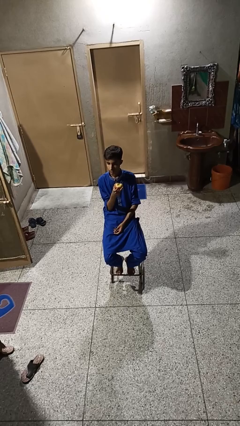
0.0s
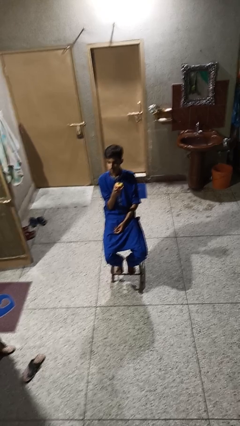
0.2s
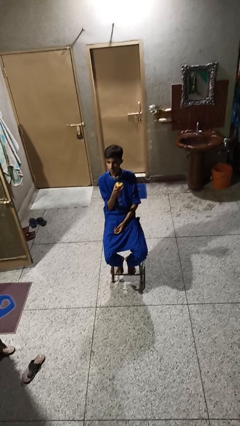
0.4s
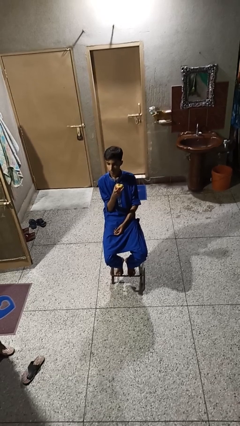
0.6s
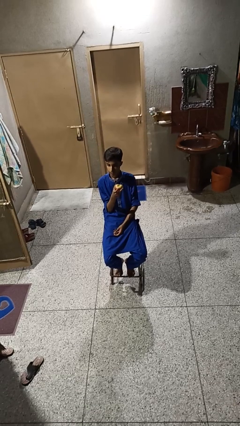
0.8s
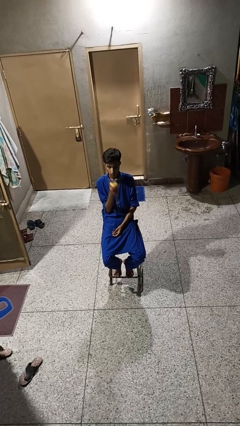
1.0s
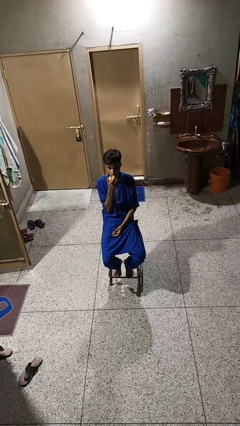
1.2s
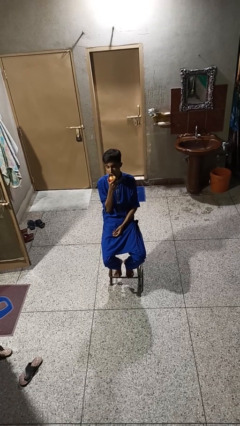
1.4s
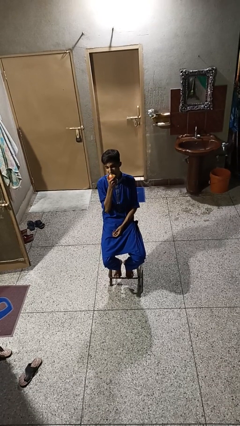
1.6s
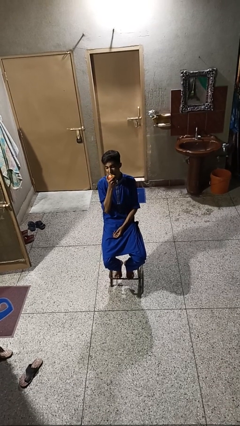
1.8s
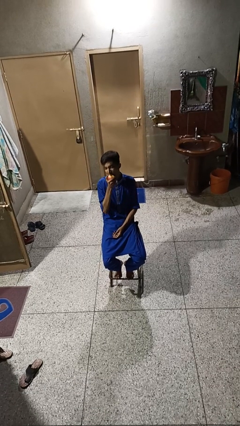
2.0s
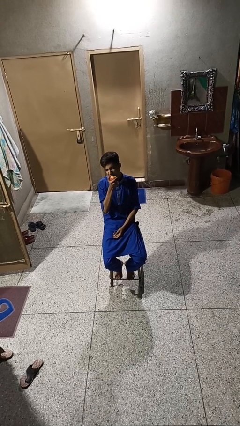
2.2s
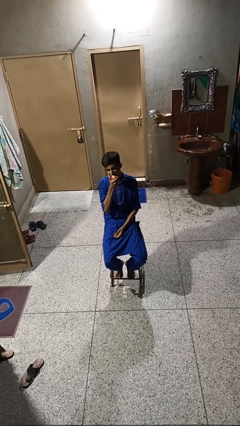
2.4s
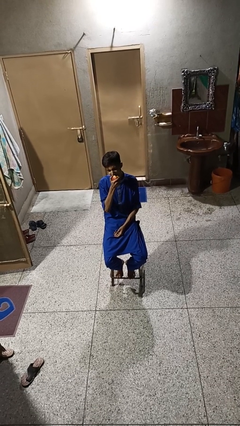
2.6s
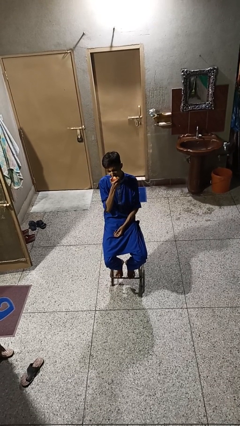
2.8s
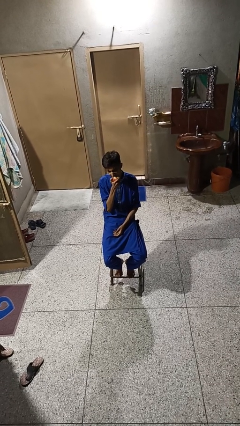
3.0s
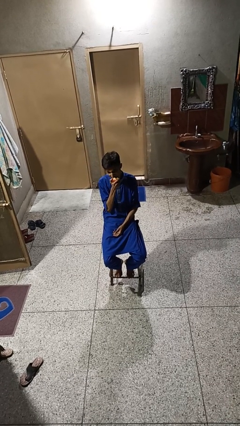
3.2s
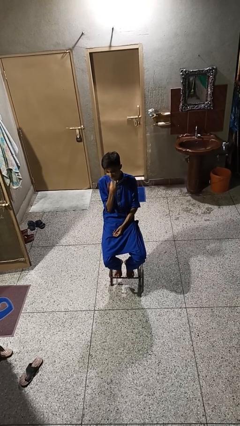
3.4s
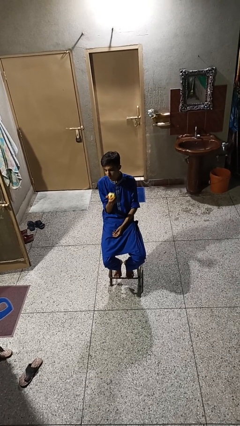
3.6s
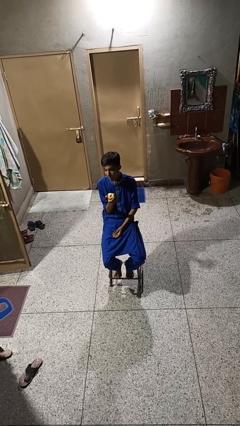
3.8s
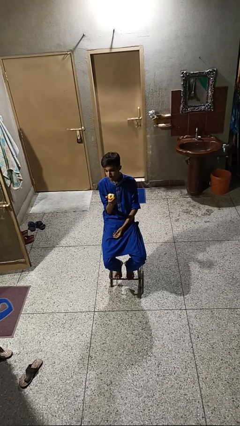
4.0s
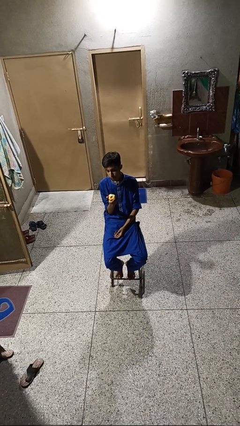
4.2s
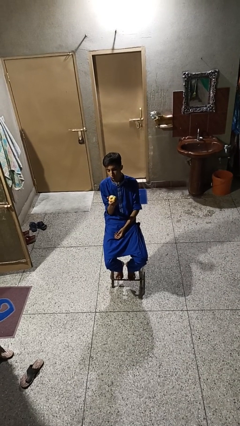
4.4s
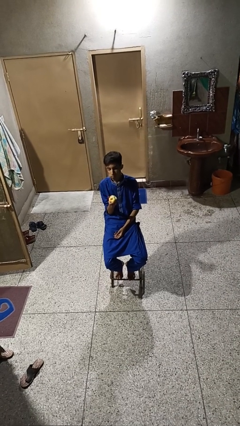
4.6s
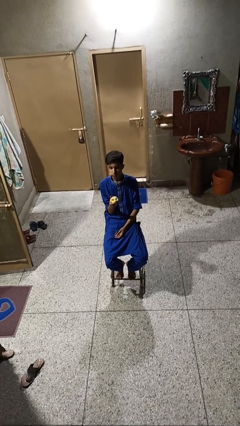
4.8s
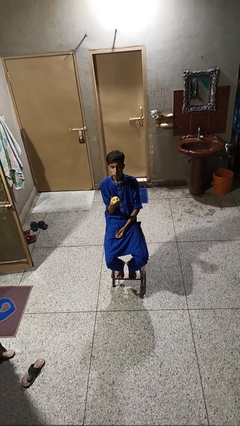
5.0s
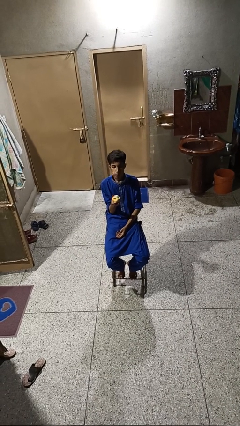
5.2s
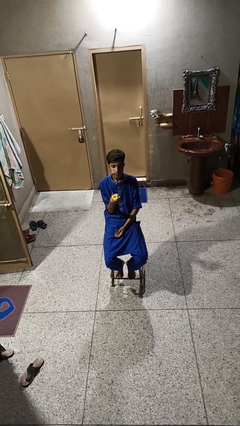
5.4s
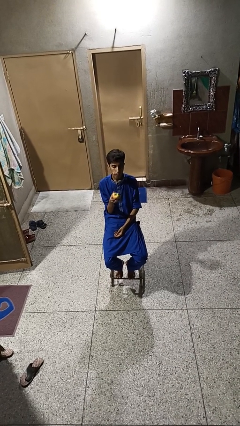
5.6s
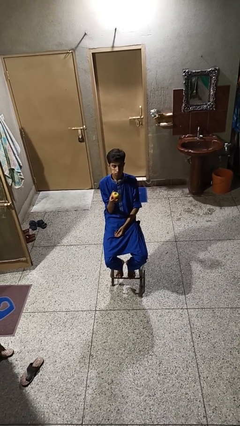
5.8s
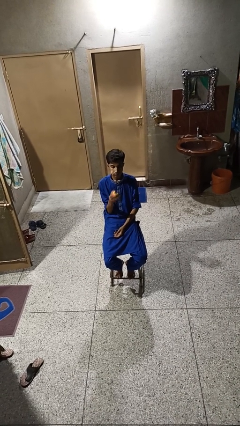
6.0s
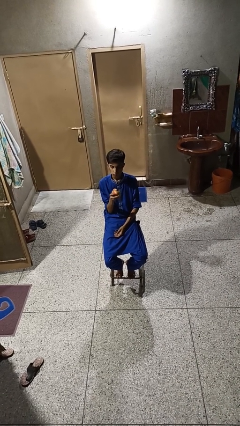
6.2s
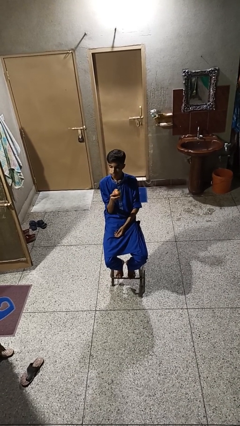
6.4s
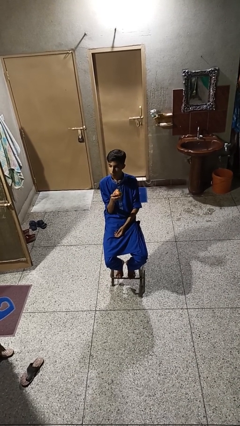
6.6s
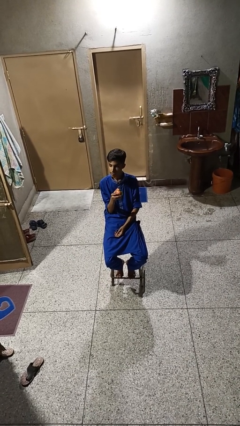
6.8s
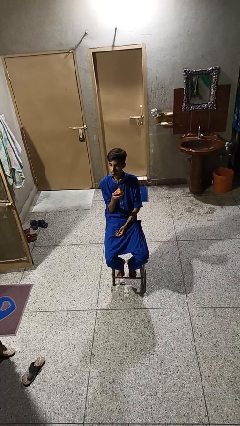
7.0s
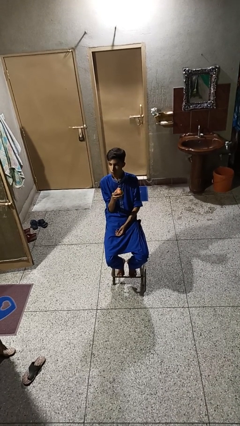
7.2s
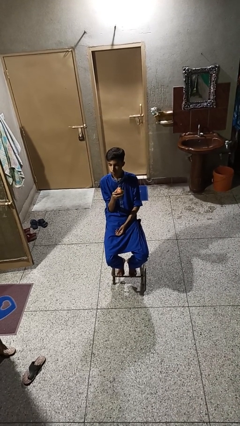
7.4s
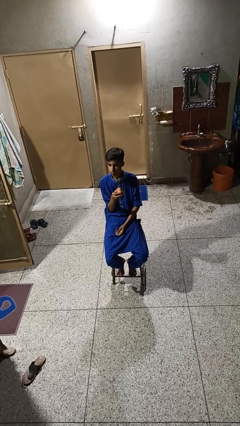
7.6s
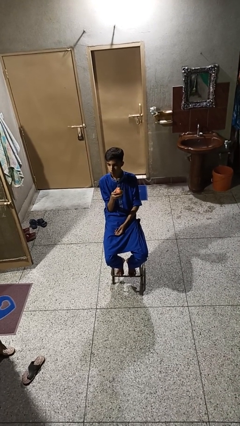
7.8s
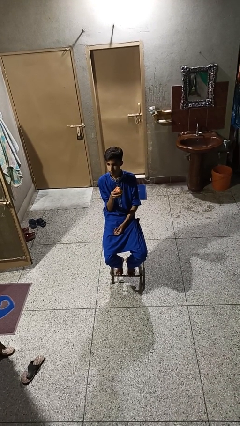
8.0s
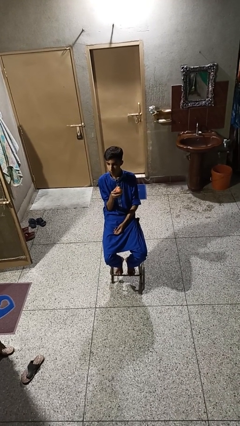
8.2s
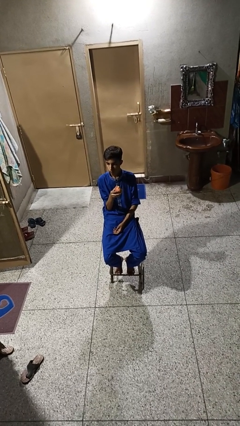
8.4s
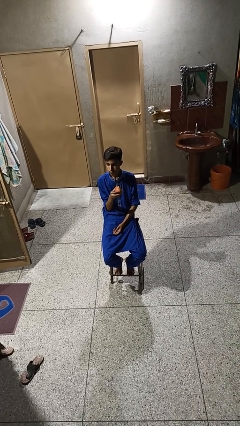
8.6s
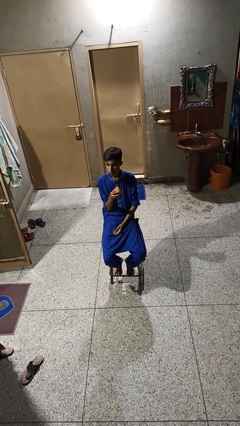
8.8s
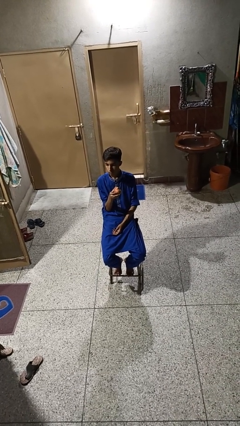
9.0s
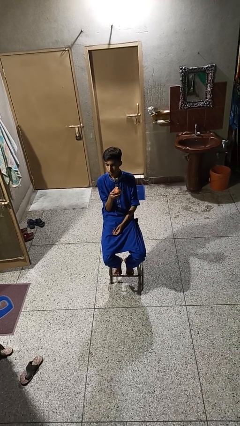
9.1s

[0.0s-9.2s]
person eats apple

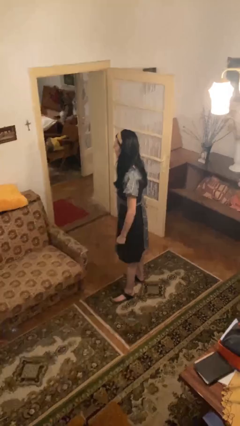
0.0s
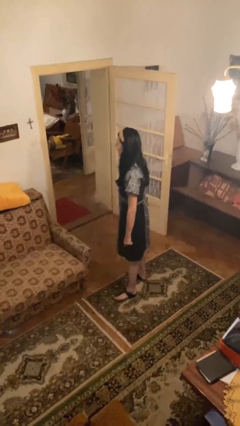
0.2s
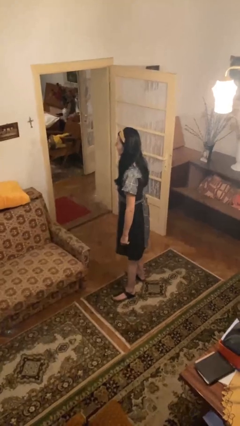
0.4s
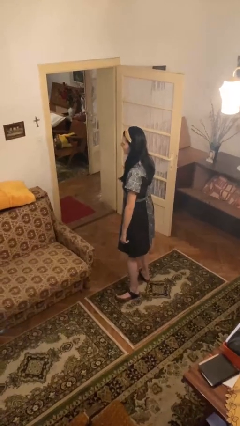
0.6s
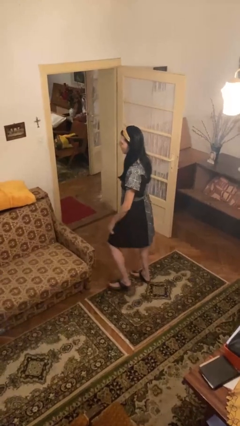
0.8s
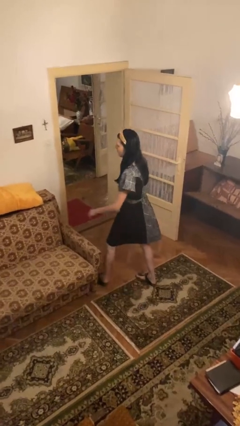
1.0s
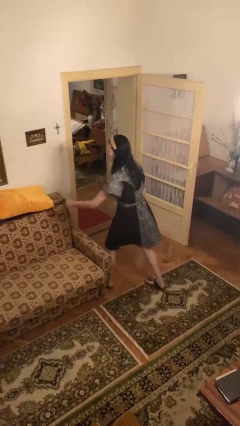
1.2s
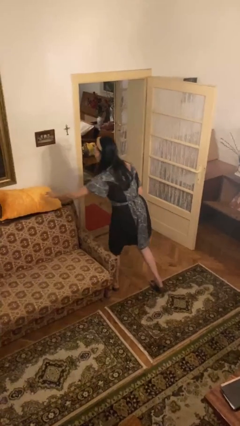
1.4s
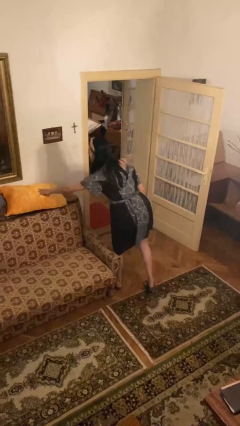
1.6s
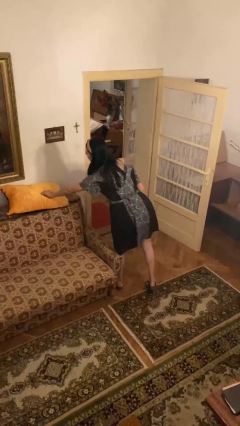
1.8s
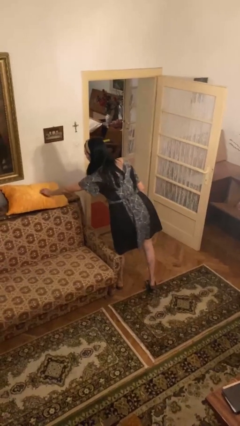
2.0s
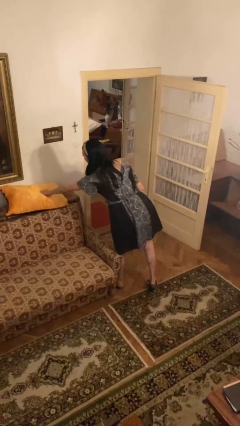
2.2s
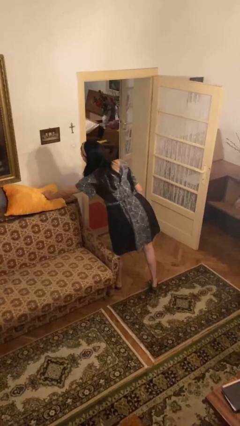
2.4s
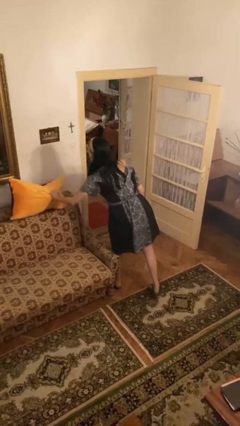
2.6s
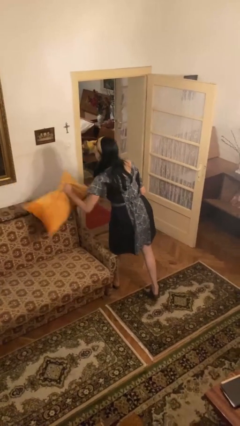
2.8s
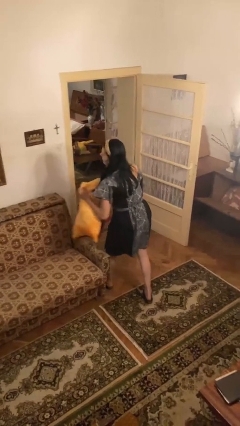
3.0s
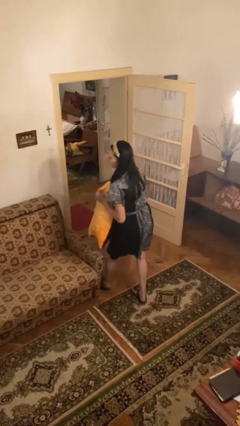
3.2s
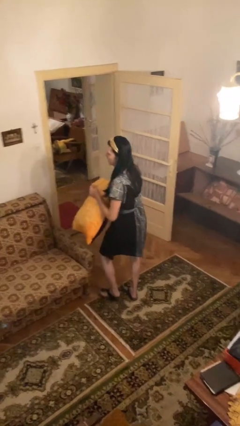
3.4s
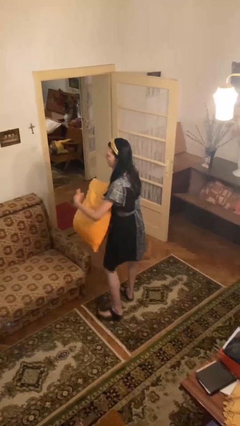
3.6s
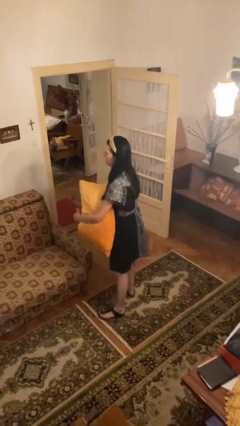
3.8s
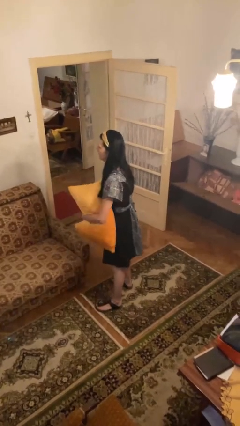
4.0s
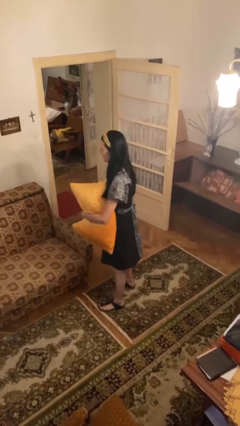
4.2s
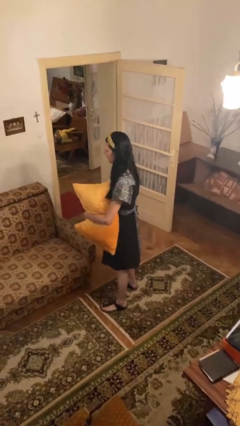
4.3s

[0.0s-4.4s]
person picks up object from couch

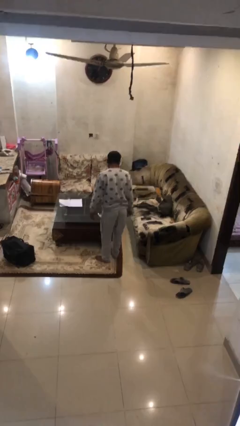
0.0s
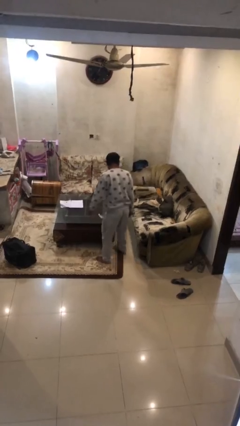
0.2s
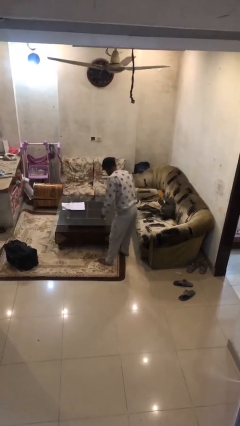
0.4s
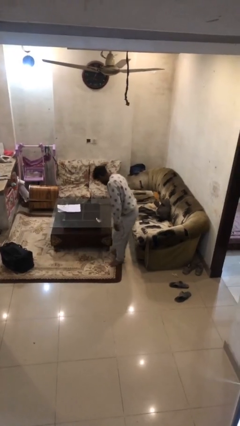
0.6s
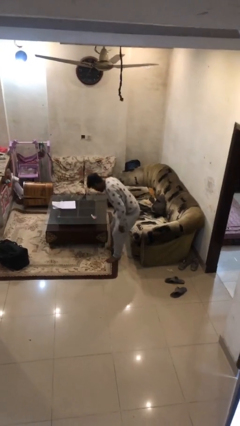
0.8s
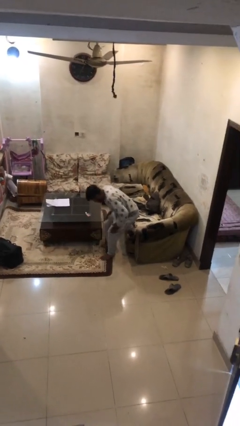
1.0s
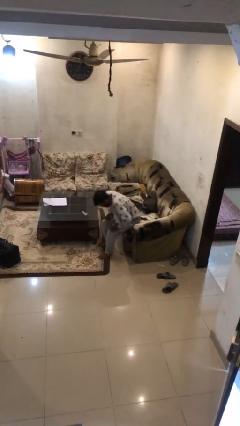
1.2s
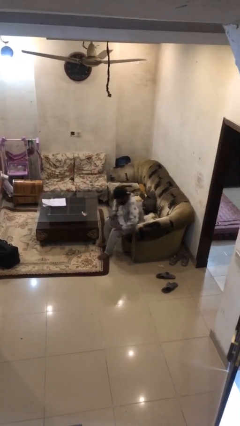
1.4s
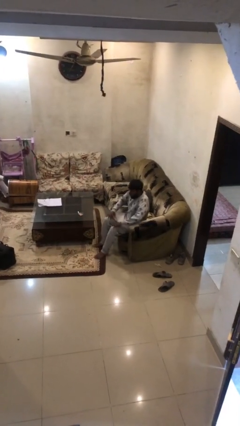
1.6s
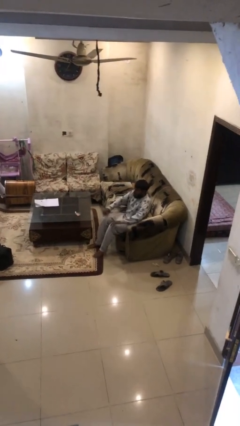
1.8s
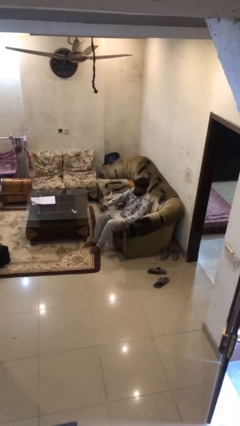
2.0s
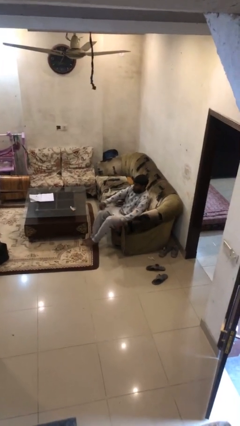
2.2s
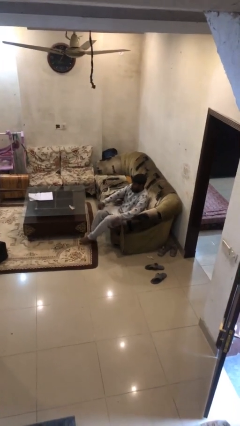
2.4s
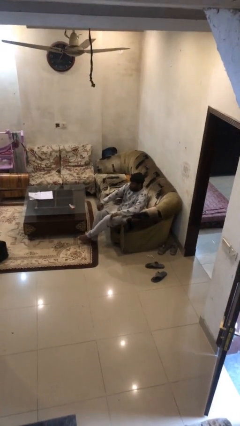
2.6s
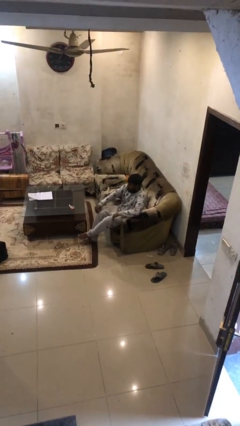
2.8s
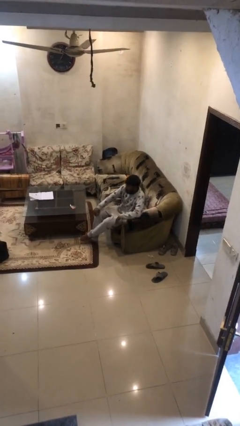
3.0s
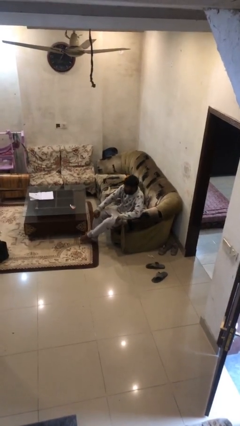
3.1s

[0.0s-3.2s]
person sits down

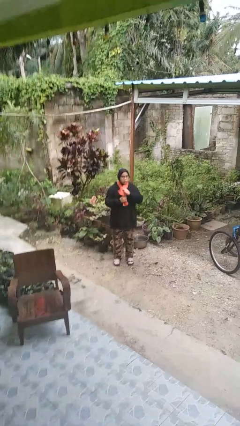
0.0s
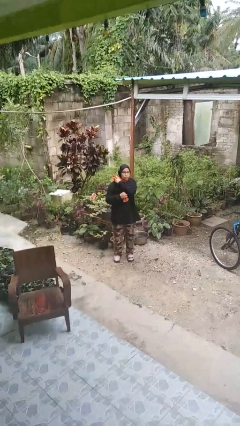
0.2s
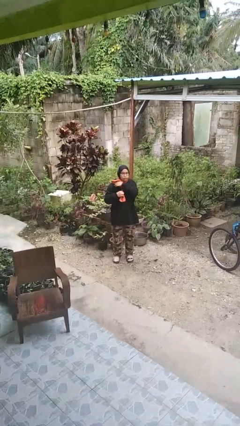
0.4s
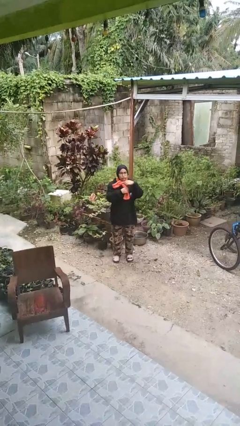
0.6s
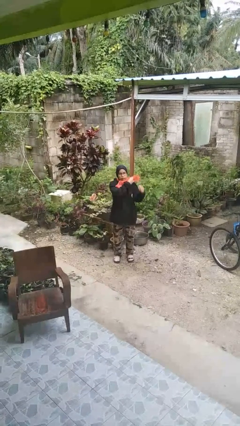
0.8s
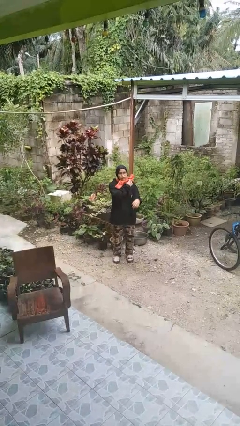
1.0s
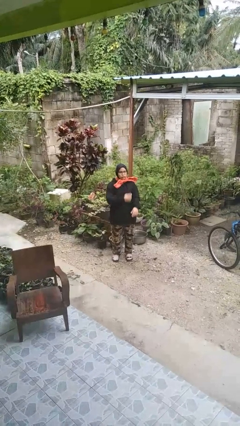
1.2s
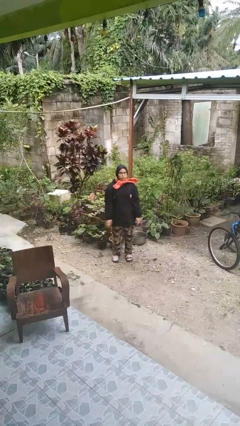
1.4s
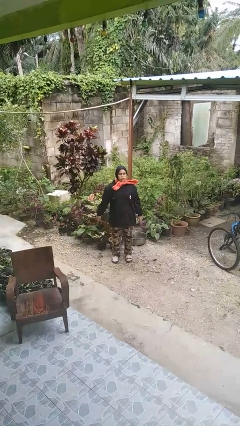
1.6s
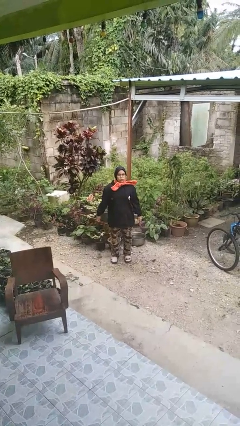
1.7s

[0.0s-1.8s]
person puts on scarf
